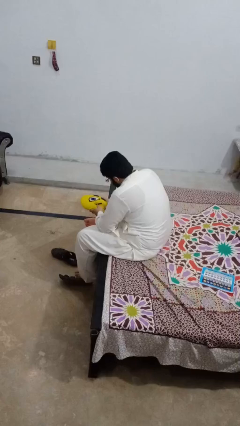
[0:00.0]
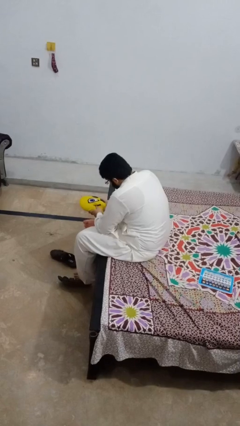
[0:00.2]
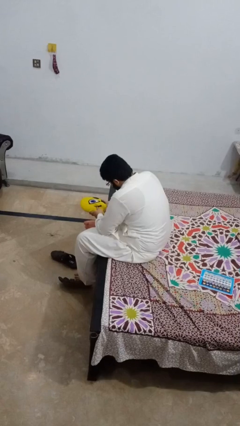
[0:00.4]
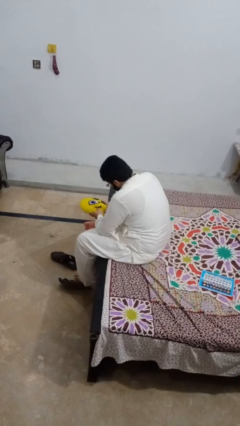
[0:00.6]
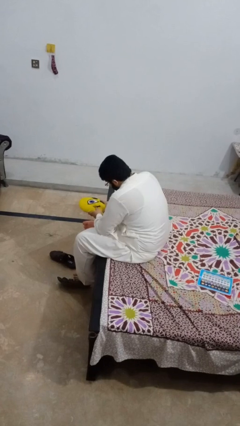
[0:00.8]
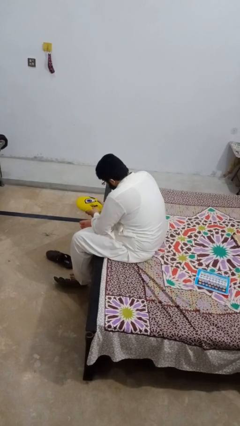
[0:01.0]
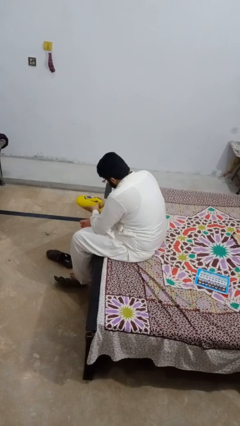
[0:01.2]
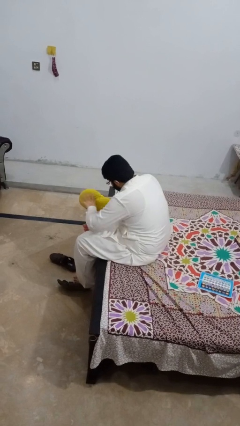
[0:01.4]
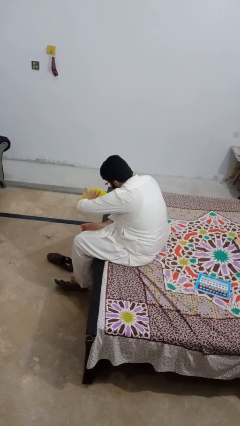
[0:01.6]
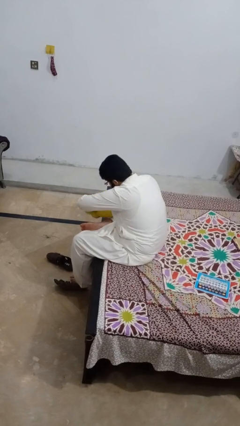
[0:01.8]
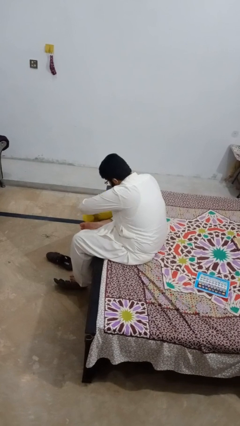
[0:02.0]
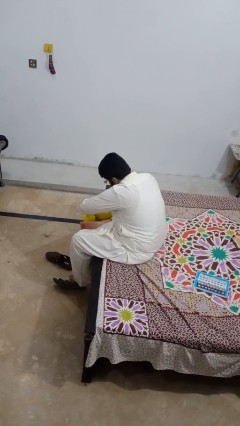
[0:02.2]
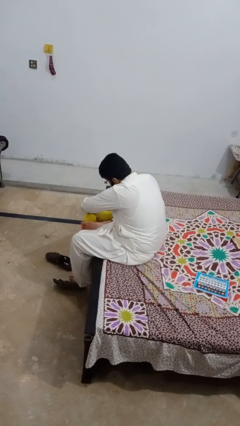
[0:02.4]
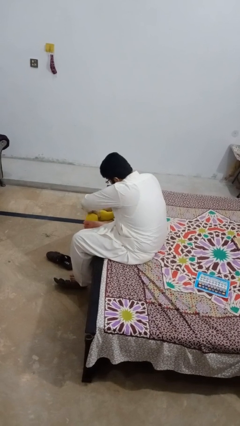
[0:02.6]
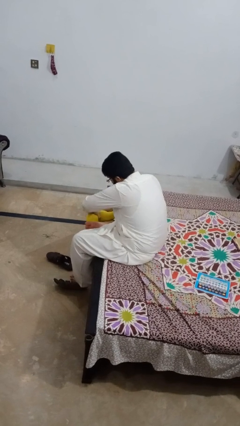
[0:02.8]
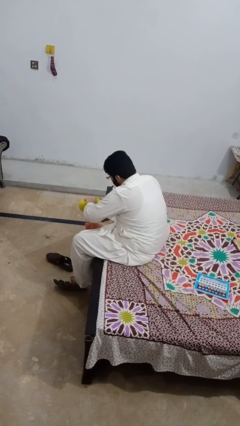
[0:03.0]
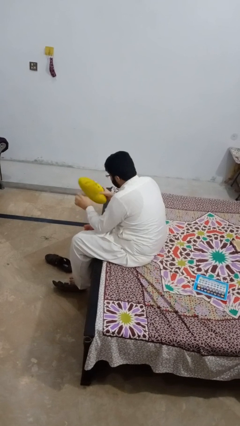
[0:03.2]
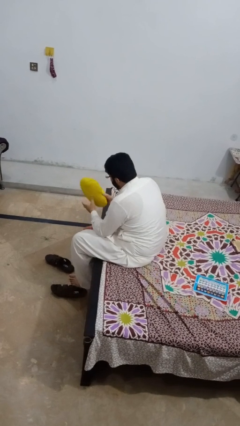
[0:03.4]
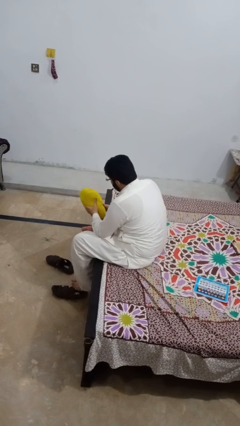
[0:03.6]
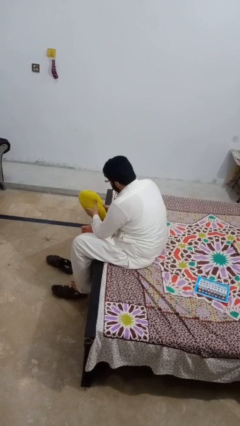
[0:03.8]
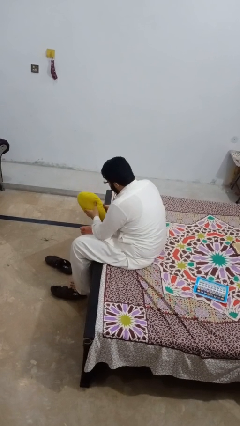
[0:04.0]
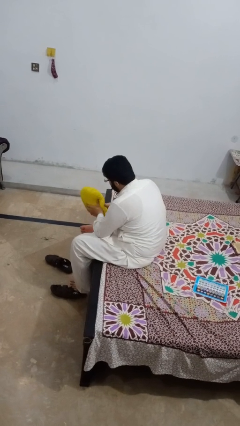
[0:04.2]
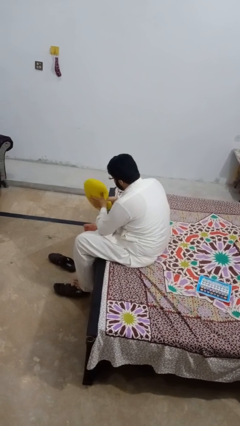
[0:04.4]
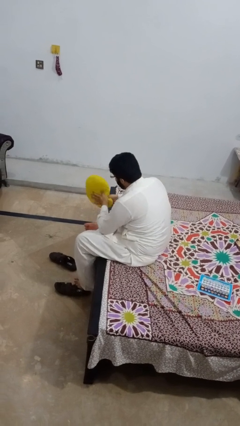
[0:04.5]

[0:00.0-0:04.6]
person squeezes object

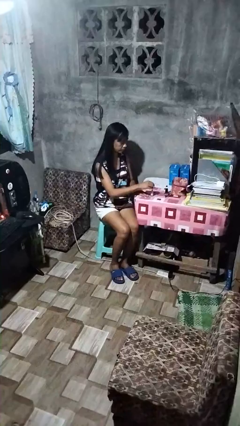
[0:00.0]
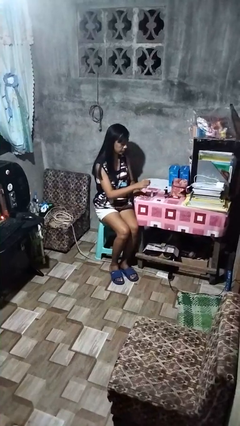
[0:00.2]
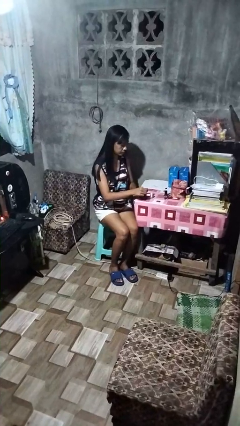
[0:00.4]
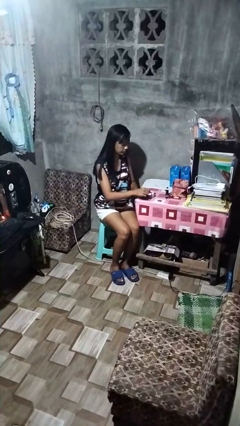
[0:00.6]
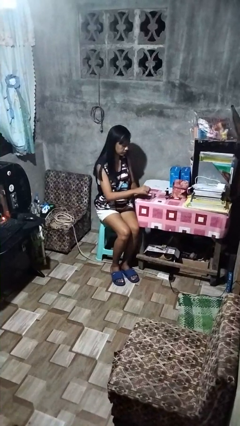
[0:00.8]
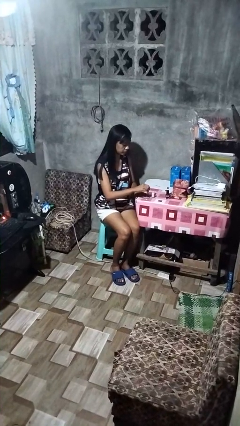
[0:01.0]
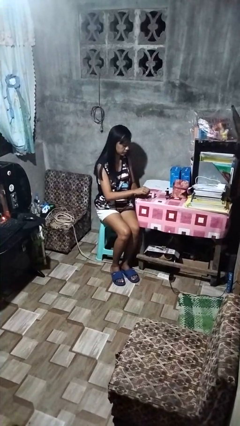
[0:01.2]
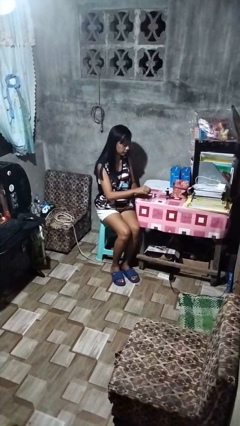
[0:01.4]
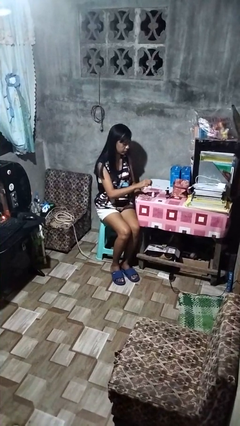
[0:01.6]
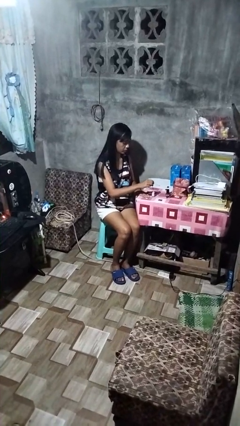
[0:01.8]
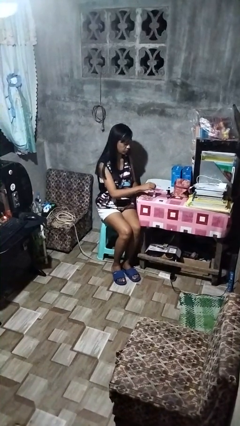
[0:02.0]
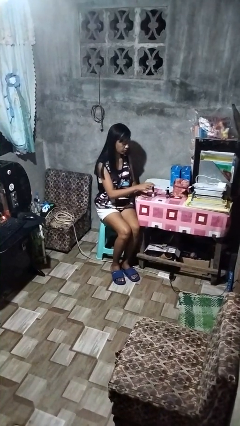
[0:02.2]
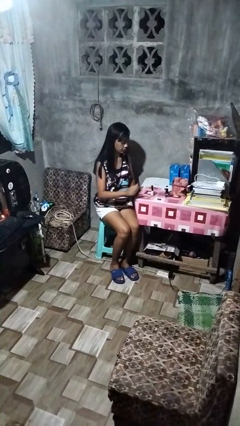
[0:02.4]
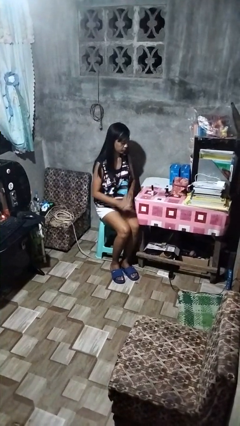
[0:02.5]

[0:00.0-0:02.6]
person paints fingernails

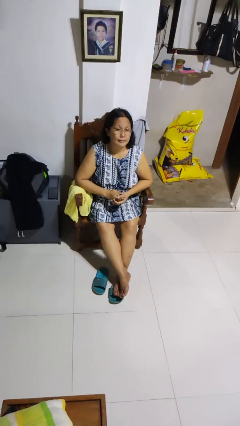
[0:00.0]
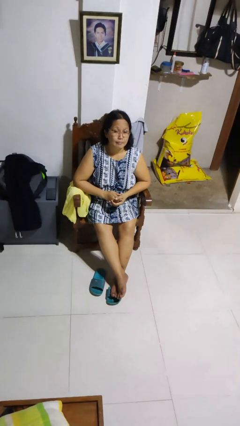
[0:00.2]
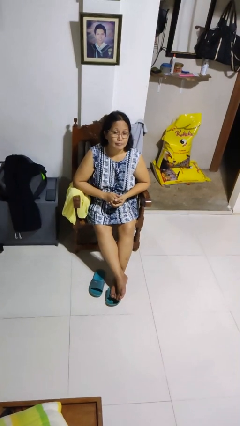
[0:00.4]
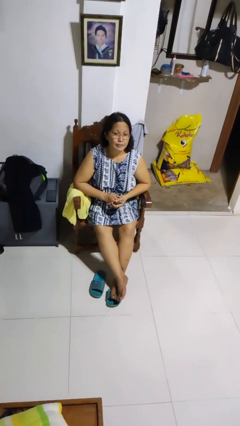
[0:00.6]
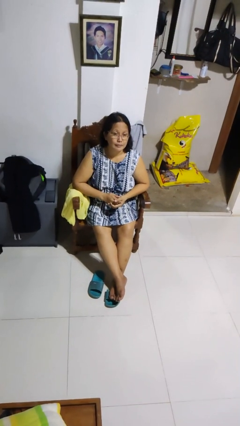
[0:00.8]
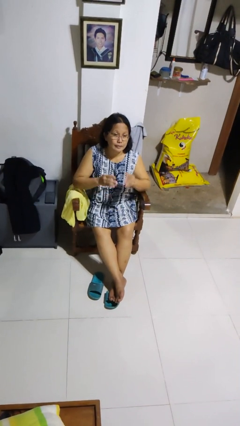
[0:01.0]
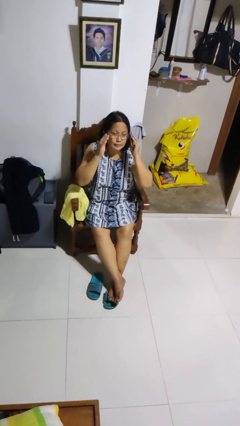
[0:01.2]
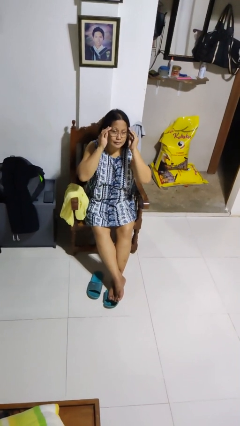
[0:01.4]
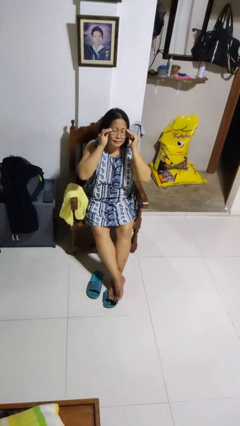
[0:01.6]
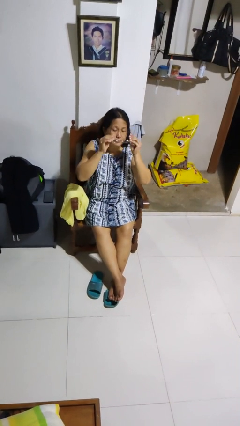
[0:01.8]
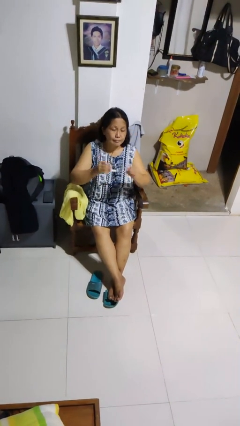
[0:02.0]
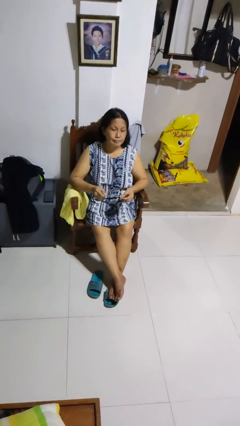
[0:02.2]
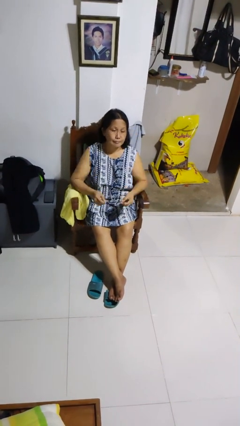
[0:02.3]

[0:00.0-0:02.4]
person takes off glasses

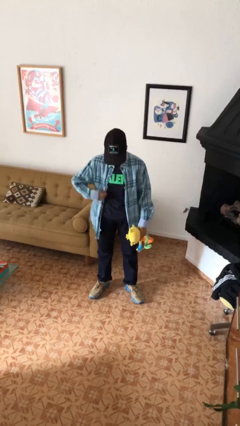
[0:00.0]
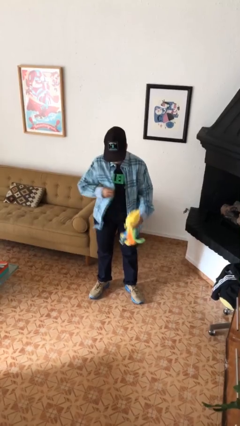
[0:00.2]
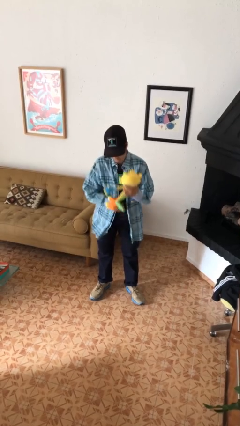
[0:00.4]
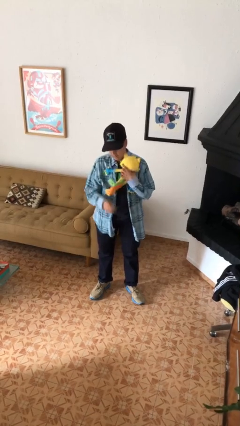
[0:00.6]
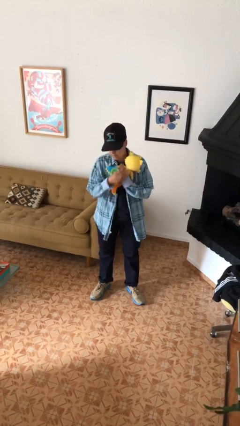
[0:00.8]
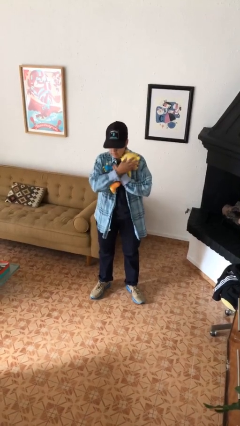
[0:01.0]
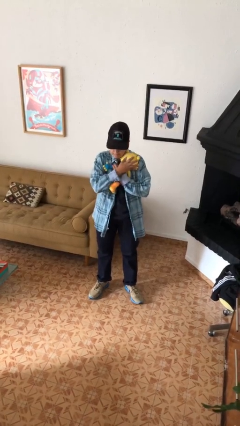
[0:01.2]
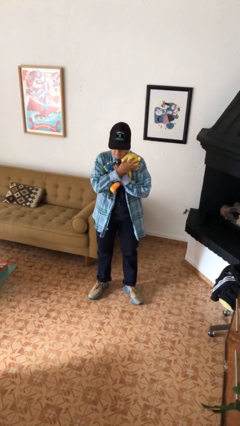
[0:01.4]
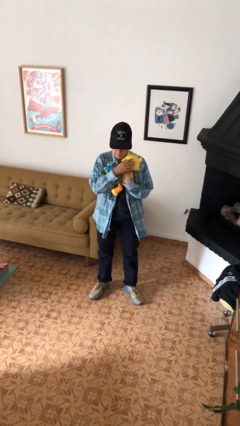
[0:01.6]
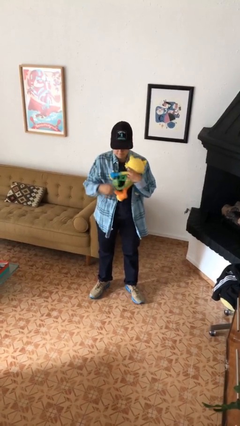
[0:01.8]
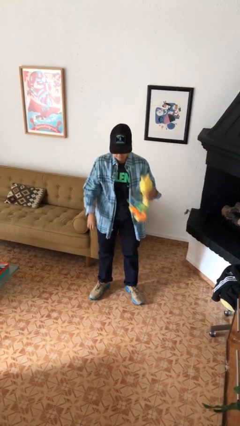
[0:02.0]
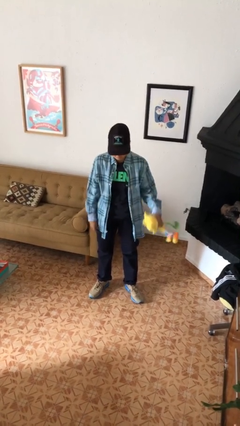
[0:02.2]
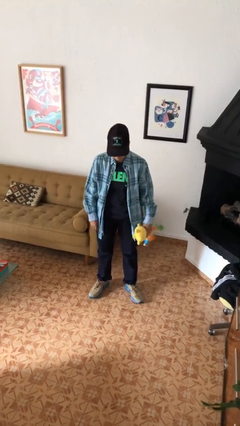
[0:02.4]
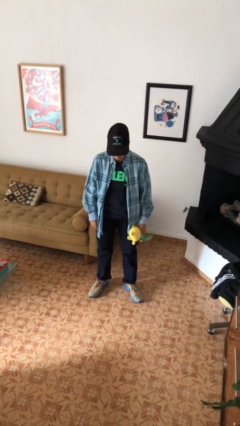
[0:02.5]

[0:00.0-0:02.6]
person hugs stuffed animal

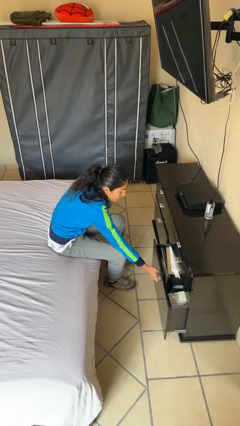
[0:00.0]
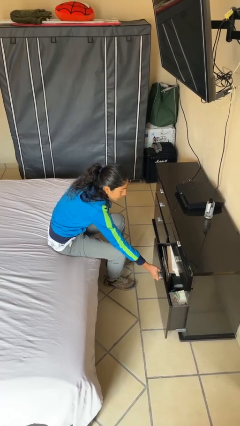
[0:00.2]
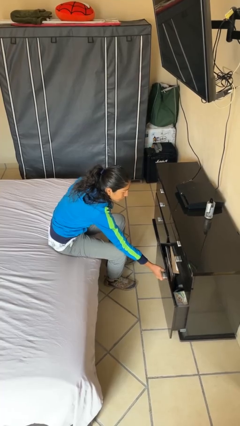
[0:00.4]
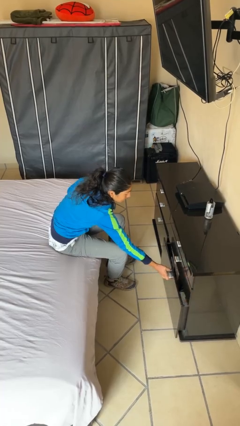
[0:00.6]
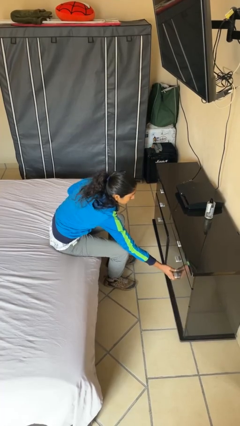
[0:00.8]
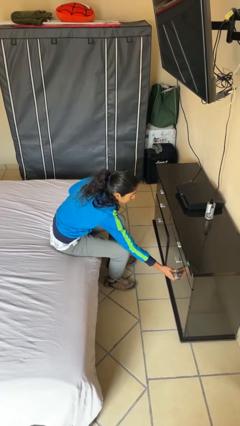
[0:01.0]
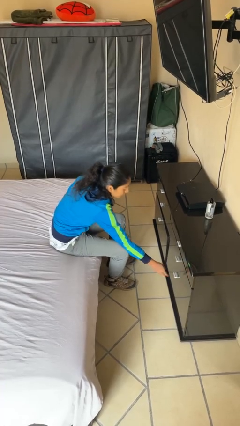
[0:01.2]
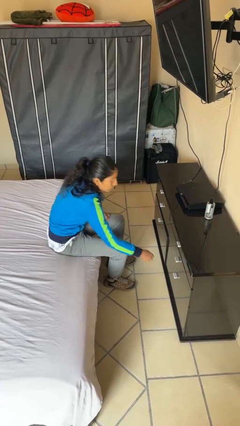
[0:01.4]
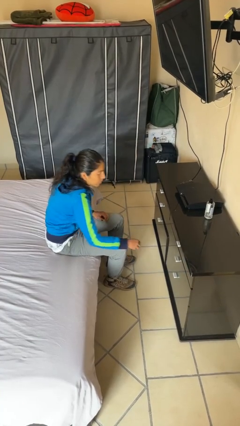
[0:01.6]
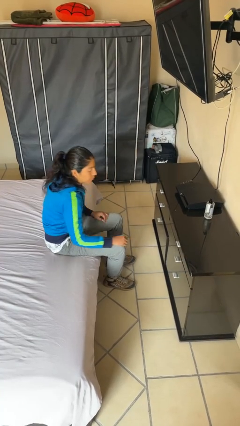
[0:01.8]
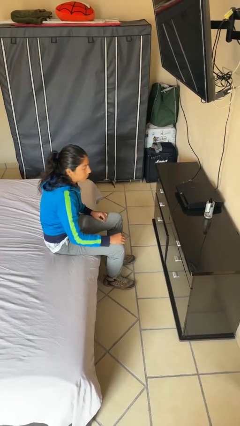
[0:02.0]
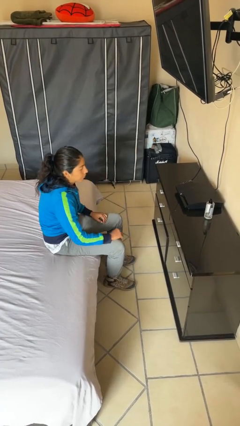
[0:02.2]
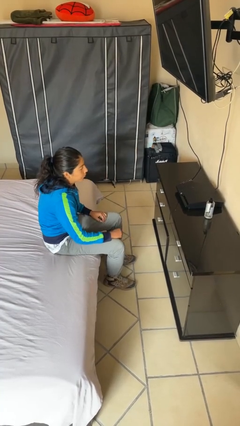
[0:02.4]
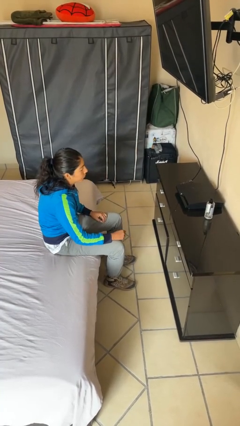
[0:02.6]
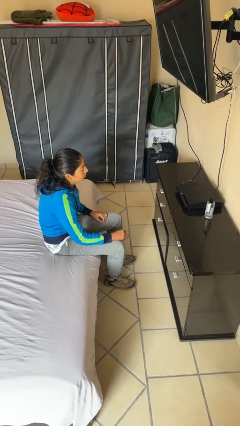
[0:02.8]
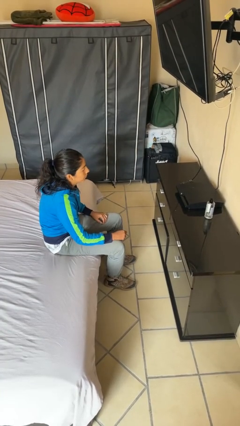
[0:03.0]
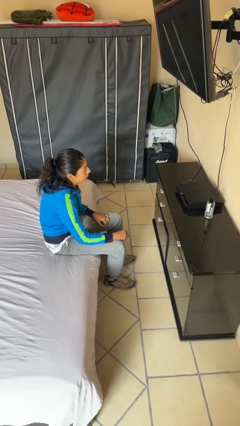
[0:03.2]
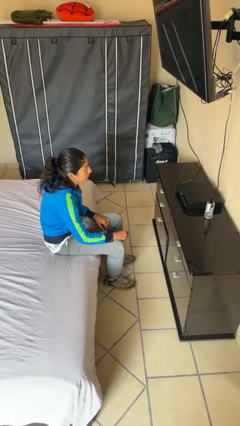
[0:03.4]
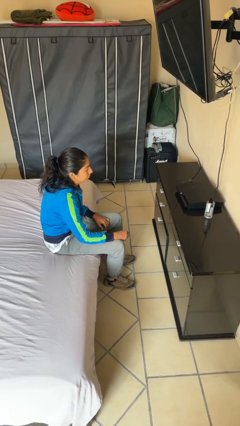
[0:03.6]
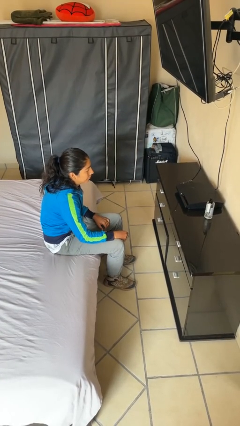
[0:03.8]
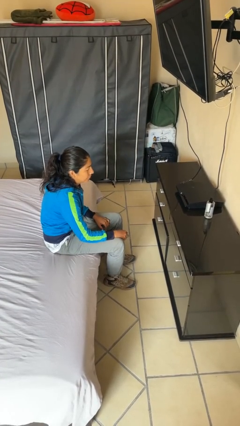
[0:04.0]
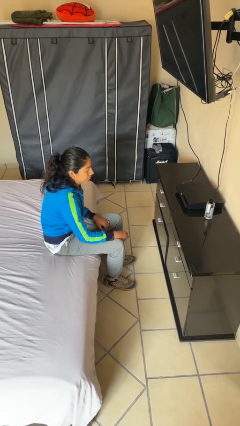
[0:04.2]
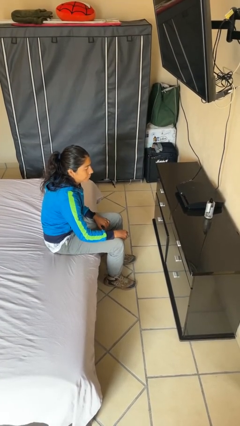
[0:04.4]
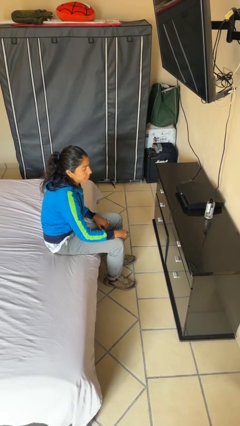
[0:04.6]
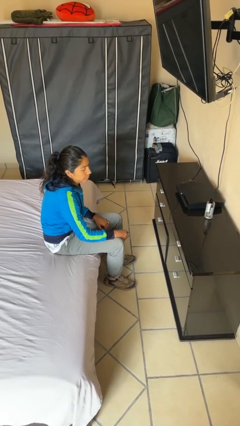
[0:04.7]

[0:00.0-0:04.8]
person closes dresser drawer

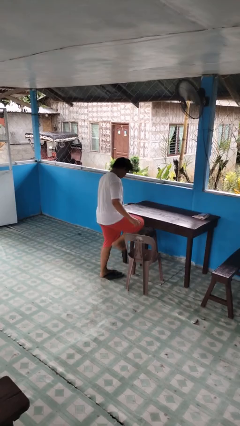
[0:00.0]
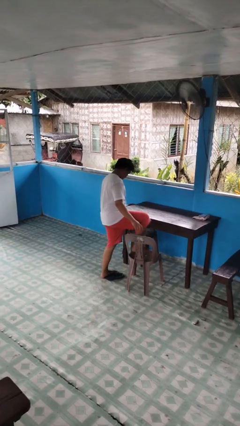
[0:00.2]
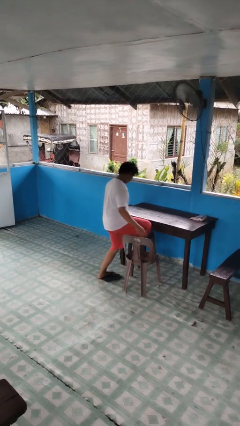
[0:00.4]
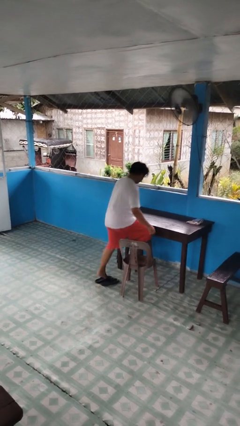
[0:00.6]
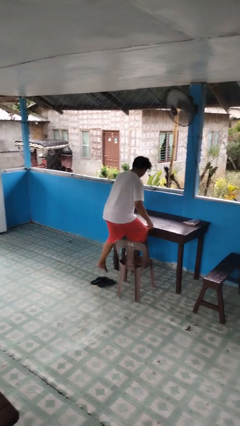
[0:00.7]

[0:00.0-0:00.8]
person climbs on chair
